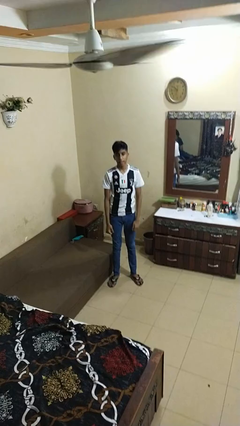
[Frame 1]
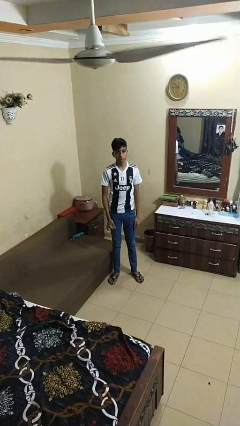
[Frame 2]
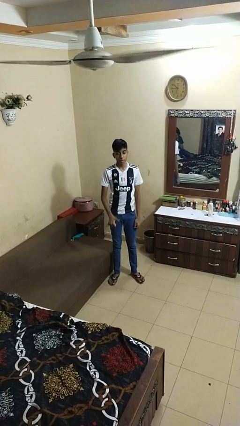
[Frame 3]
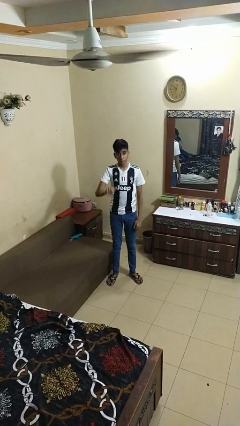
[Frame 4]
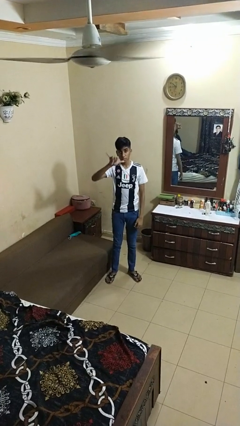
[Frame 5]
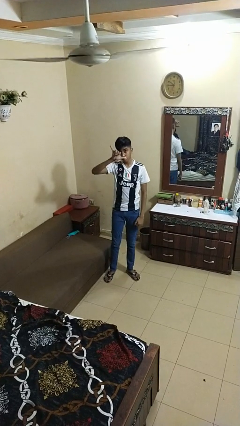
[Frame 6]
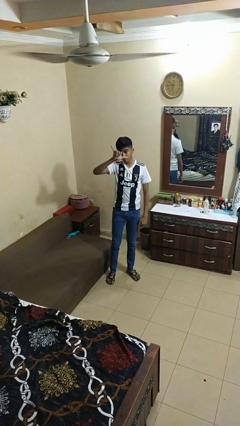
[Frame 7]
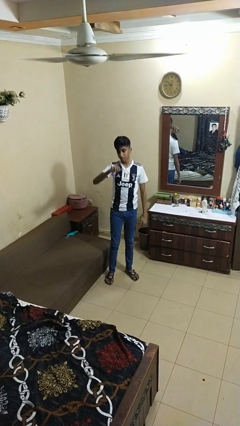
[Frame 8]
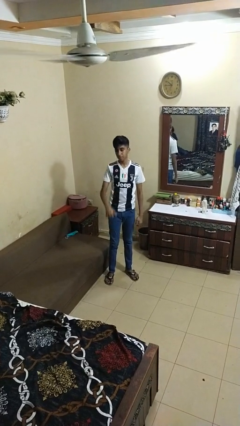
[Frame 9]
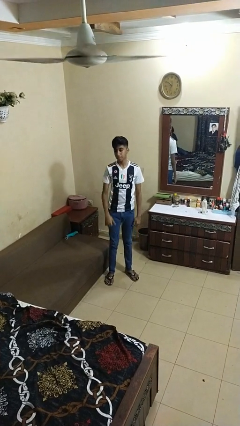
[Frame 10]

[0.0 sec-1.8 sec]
person gestures hang loose

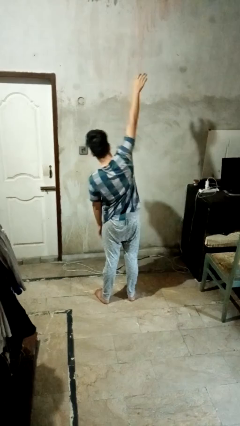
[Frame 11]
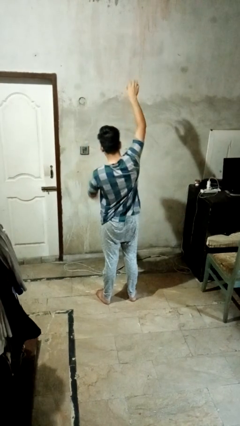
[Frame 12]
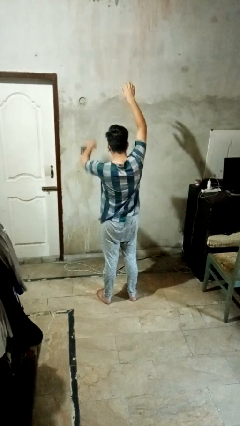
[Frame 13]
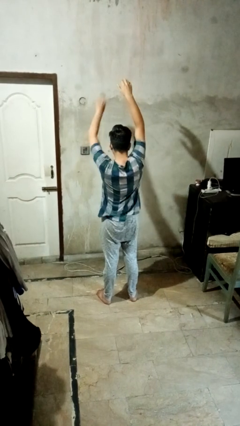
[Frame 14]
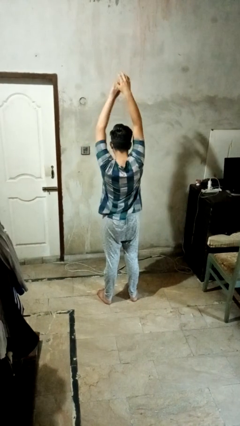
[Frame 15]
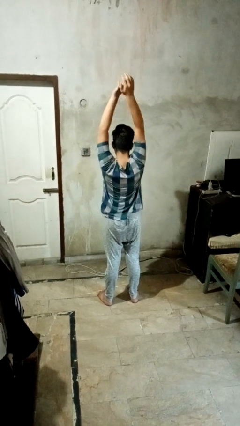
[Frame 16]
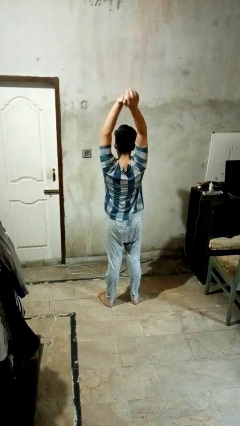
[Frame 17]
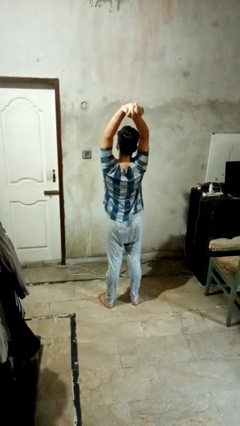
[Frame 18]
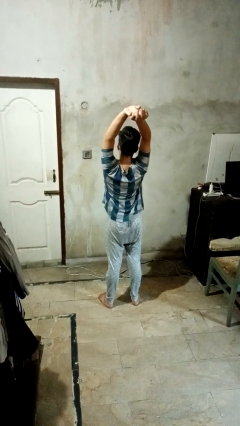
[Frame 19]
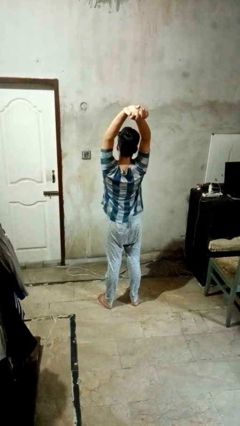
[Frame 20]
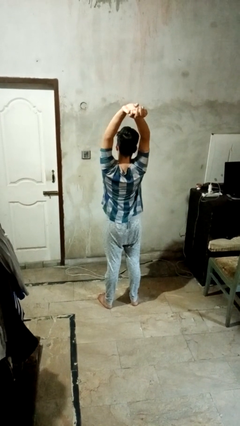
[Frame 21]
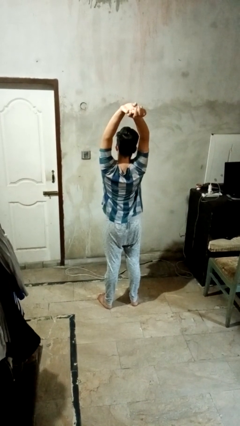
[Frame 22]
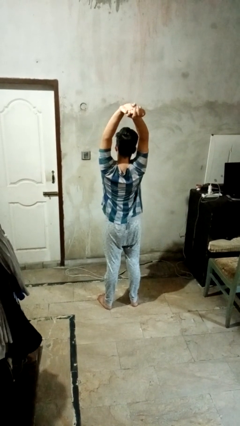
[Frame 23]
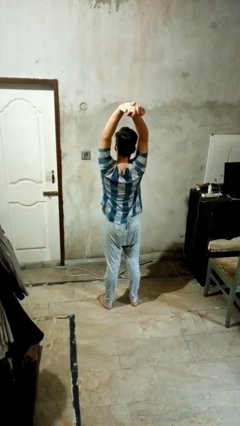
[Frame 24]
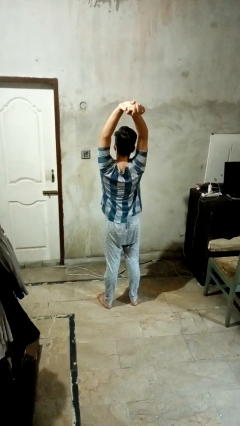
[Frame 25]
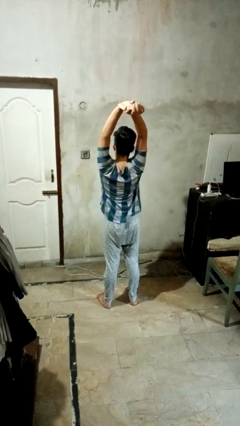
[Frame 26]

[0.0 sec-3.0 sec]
person stretches arms over head

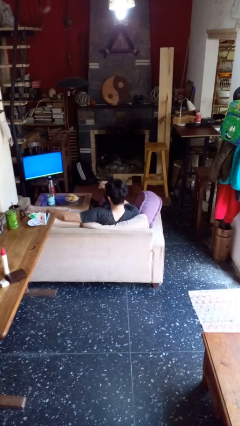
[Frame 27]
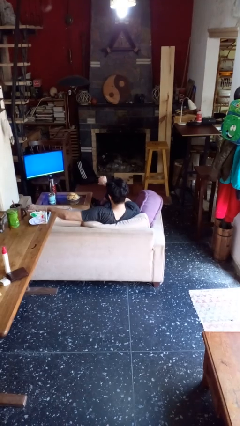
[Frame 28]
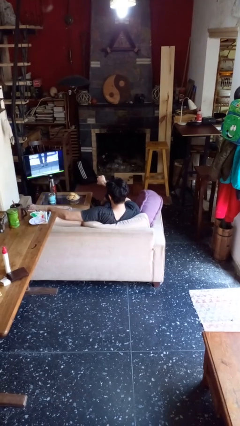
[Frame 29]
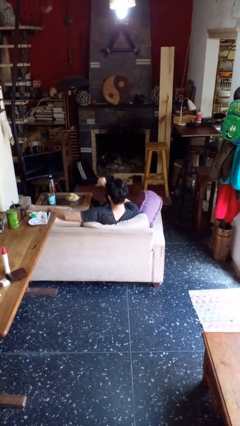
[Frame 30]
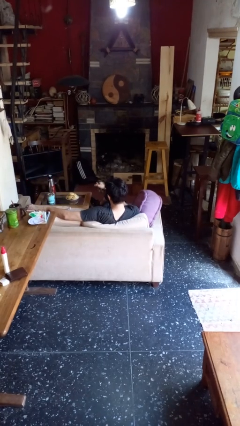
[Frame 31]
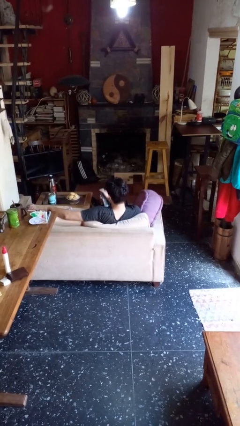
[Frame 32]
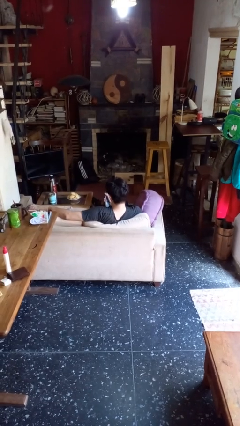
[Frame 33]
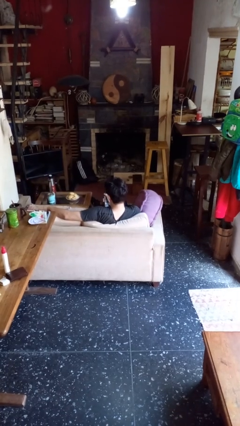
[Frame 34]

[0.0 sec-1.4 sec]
person uses television remote

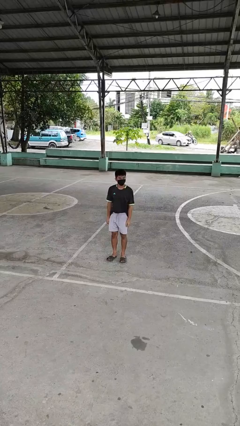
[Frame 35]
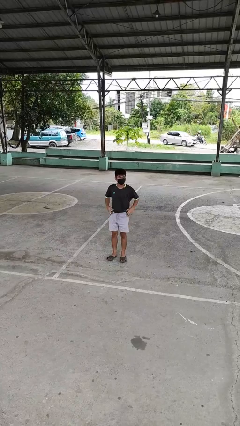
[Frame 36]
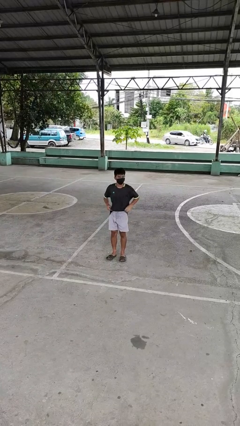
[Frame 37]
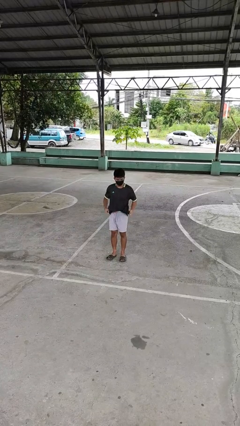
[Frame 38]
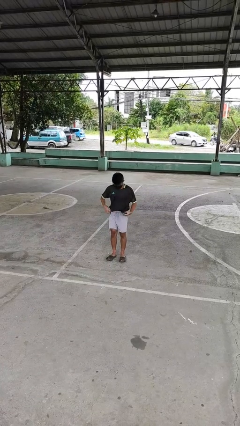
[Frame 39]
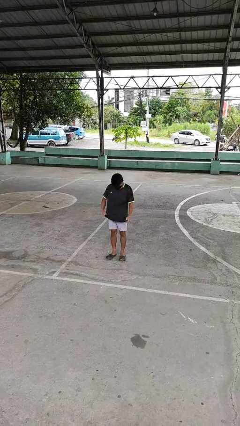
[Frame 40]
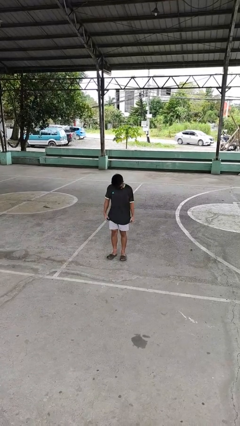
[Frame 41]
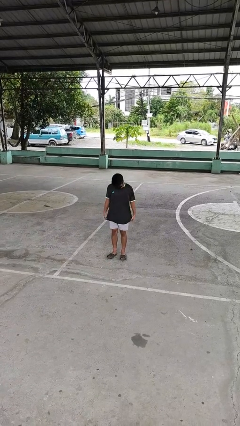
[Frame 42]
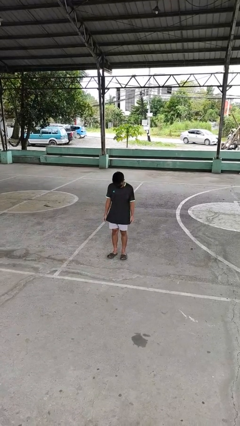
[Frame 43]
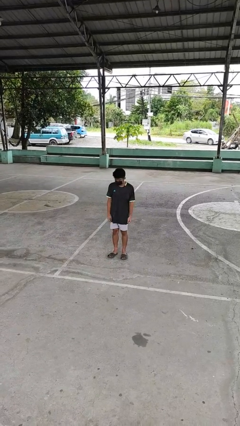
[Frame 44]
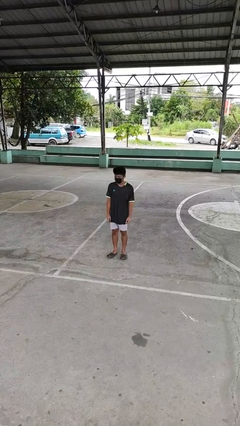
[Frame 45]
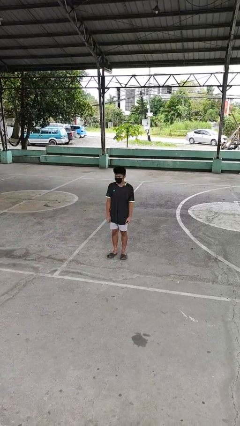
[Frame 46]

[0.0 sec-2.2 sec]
person untucks shirt

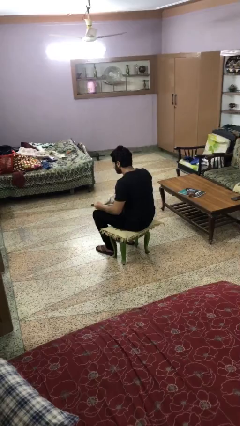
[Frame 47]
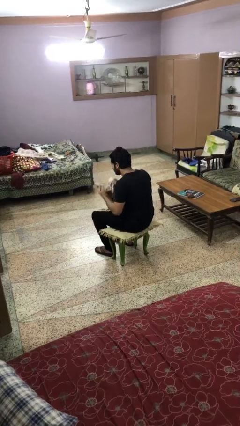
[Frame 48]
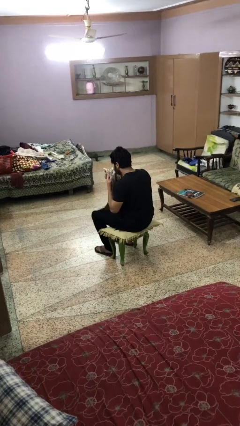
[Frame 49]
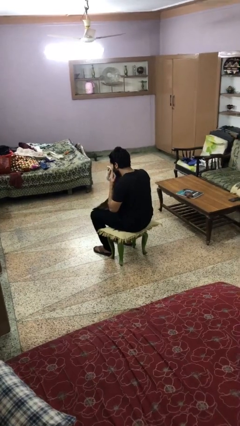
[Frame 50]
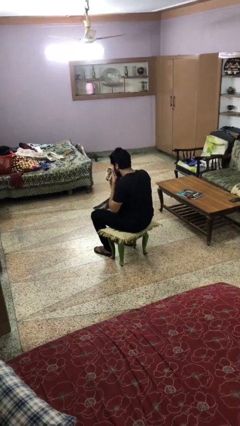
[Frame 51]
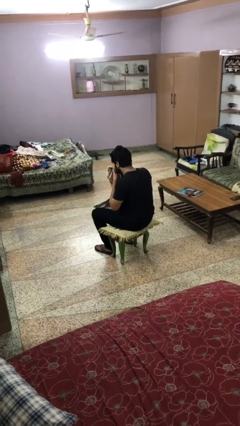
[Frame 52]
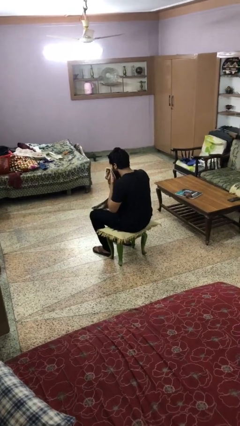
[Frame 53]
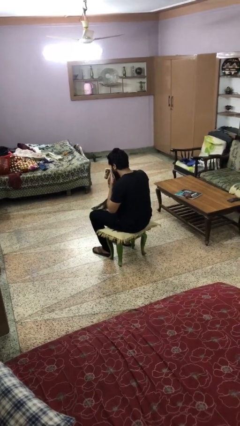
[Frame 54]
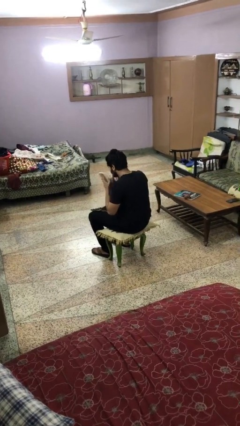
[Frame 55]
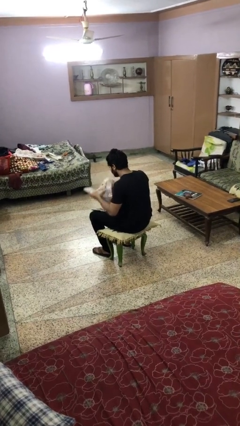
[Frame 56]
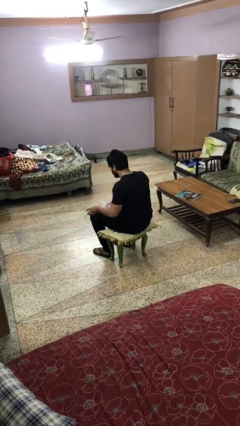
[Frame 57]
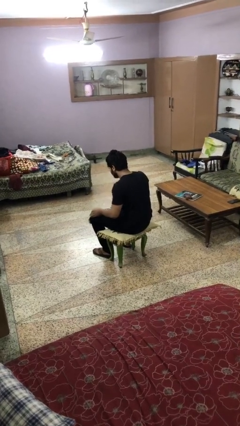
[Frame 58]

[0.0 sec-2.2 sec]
person wipes mouth with napkin

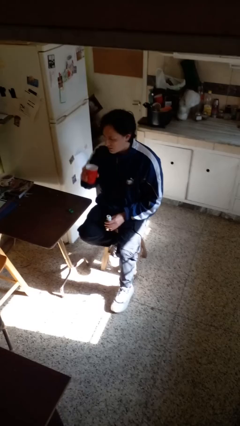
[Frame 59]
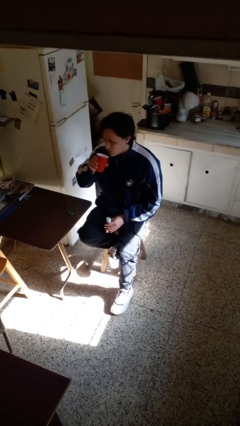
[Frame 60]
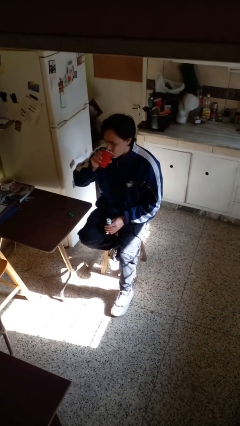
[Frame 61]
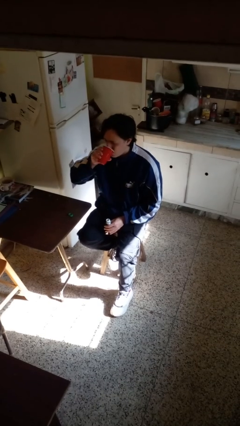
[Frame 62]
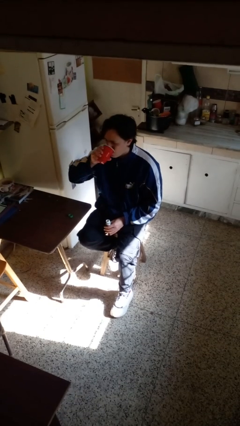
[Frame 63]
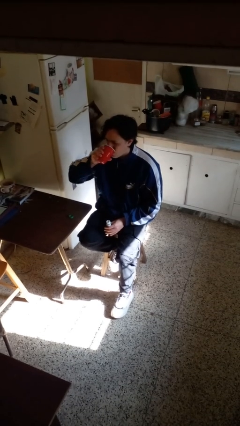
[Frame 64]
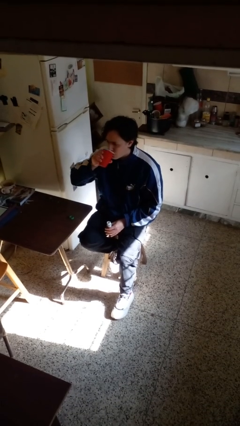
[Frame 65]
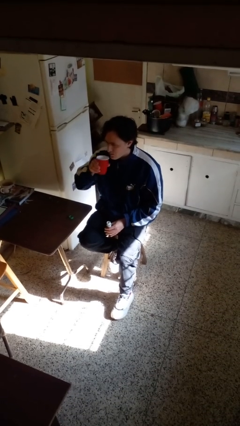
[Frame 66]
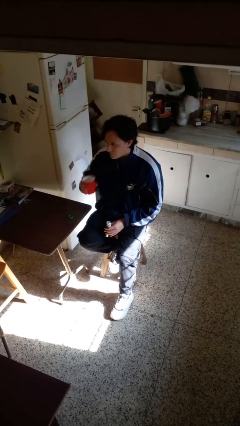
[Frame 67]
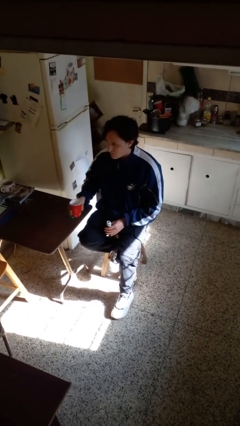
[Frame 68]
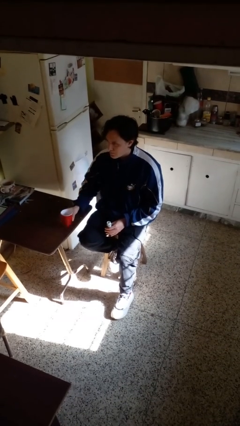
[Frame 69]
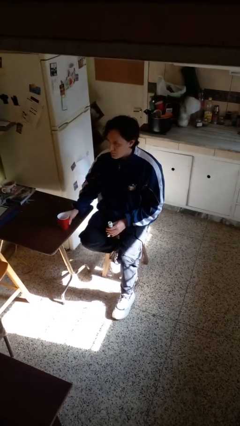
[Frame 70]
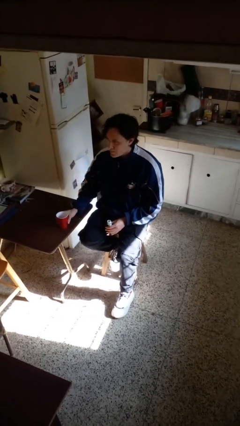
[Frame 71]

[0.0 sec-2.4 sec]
person drinks from cup

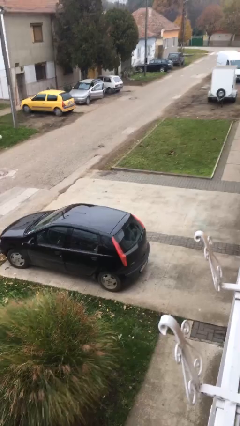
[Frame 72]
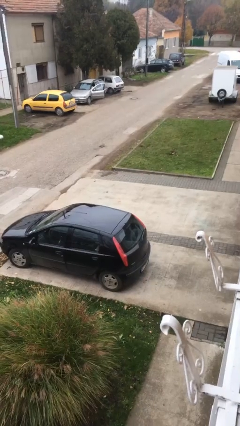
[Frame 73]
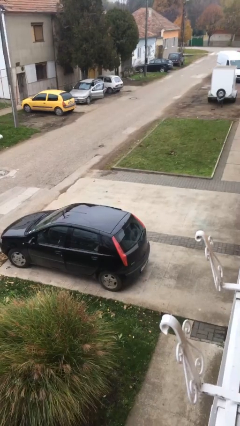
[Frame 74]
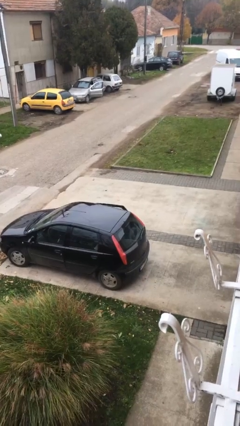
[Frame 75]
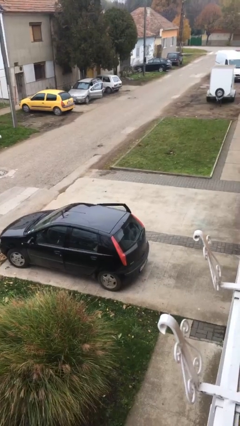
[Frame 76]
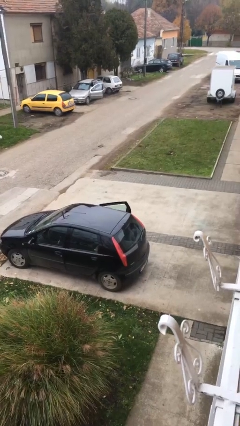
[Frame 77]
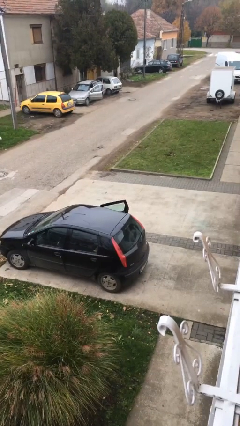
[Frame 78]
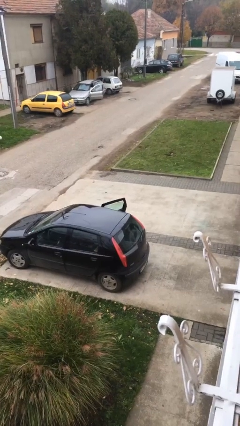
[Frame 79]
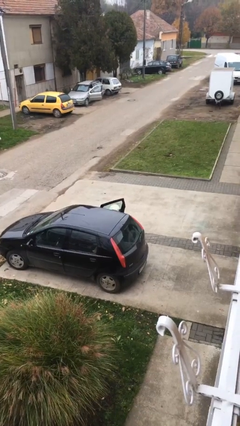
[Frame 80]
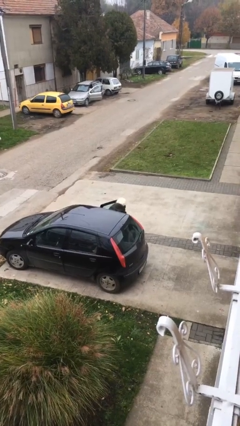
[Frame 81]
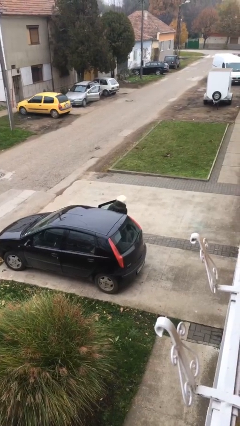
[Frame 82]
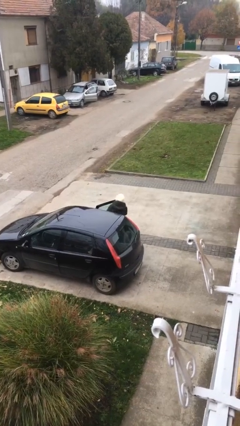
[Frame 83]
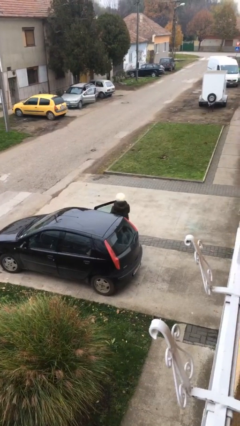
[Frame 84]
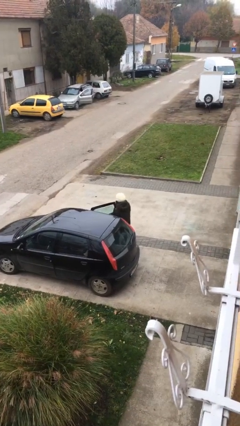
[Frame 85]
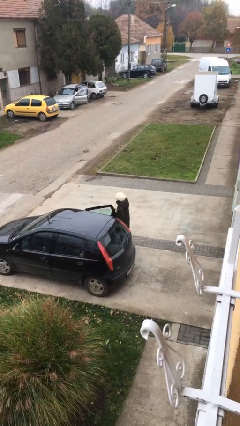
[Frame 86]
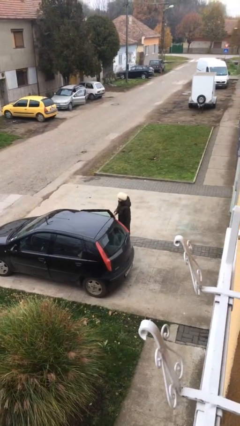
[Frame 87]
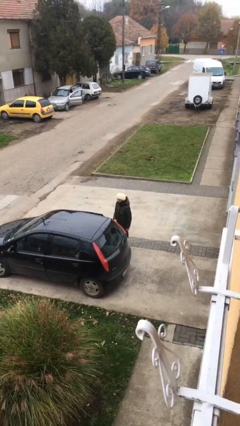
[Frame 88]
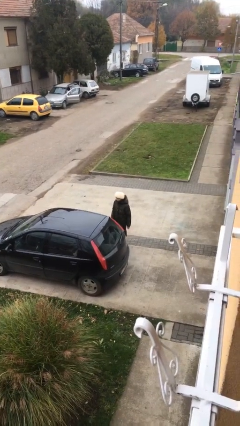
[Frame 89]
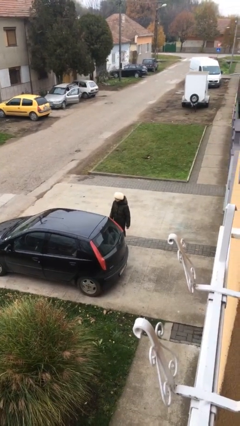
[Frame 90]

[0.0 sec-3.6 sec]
person exits car

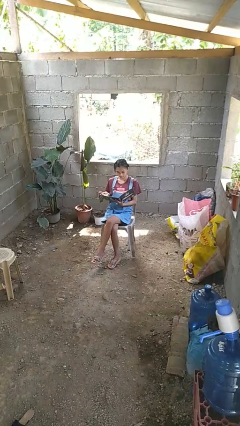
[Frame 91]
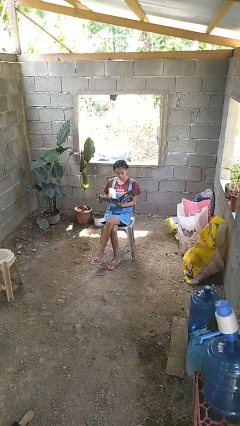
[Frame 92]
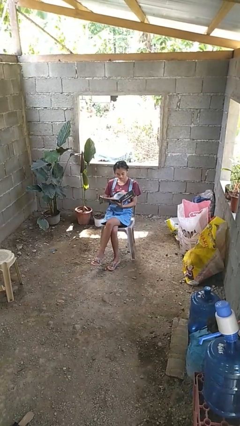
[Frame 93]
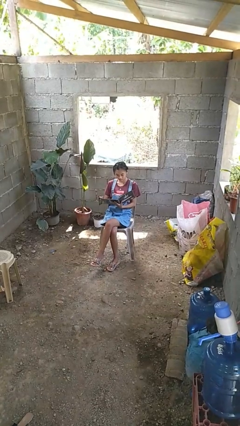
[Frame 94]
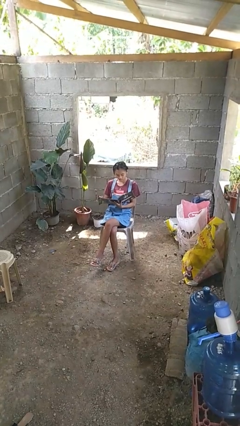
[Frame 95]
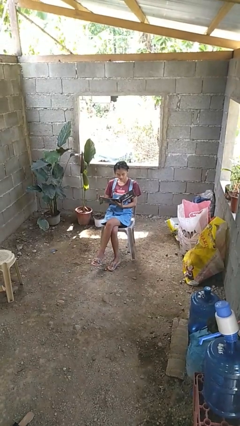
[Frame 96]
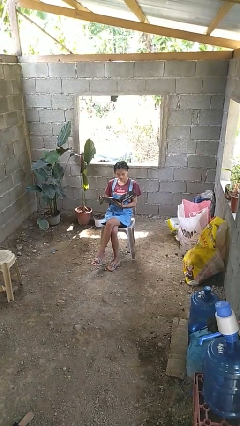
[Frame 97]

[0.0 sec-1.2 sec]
person reads magazine
